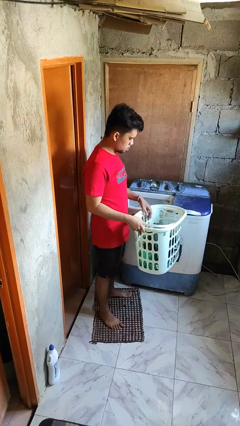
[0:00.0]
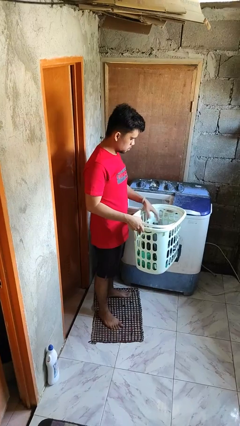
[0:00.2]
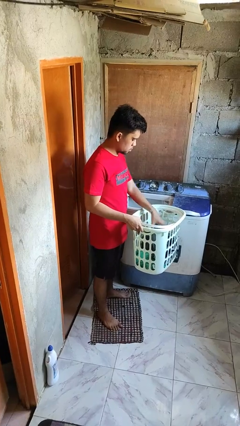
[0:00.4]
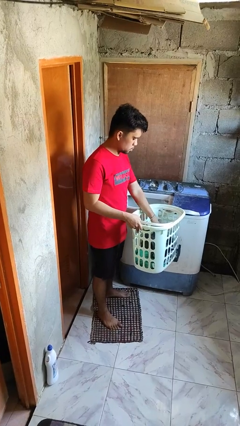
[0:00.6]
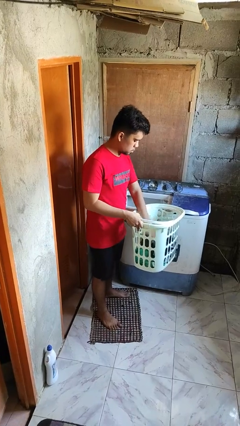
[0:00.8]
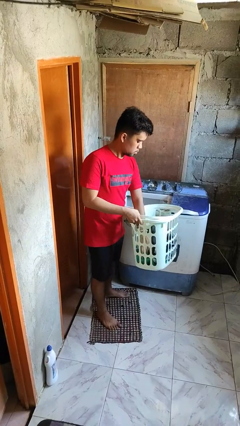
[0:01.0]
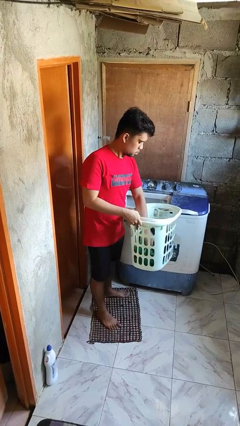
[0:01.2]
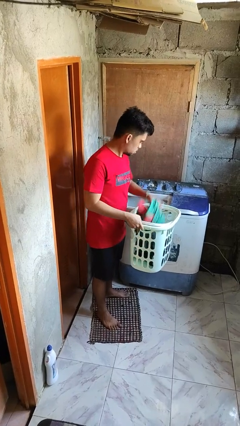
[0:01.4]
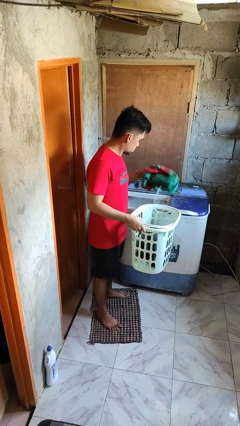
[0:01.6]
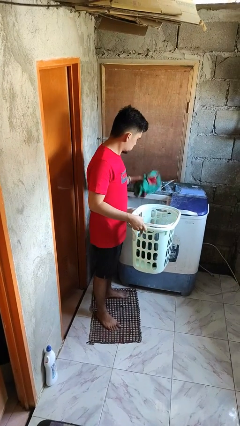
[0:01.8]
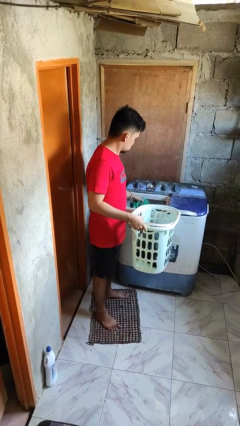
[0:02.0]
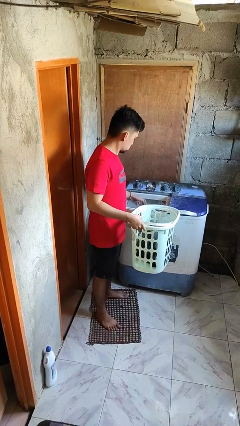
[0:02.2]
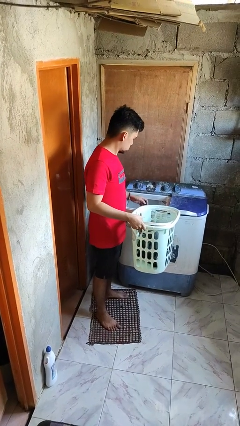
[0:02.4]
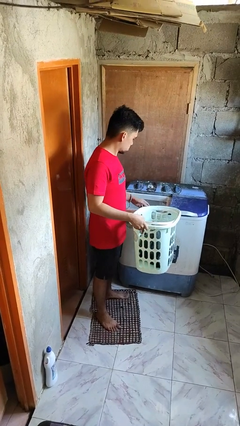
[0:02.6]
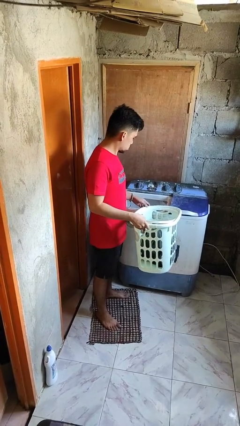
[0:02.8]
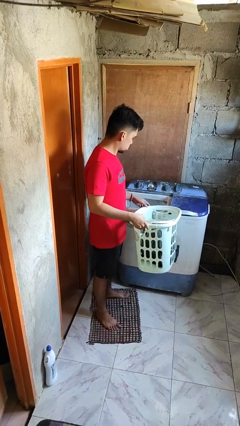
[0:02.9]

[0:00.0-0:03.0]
person loads clotheswasher

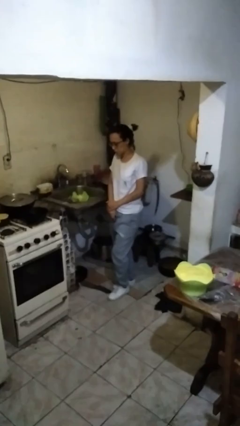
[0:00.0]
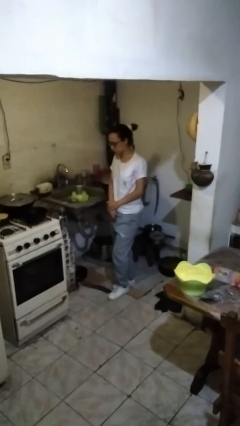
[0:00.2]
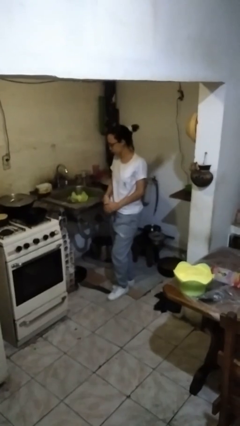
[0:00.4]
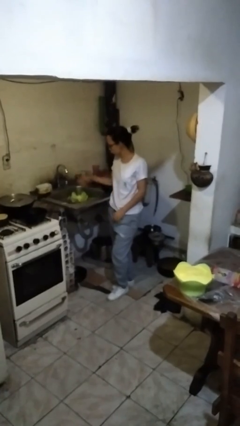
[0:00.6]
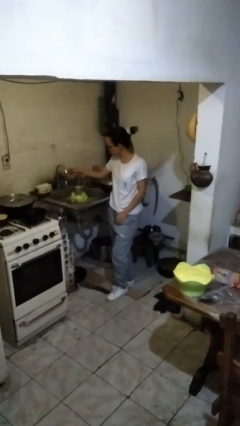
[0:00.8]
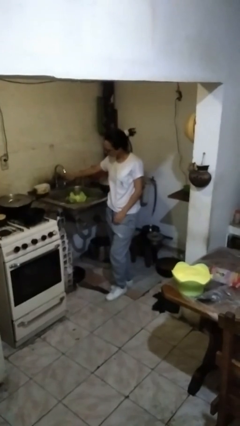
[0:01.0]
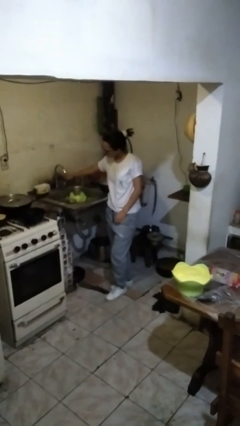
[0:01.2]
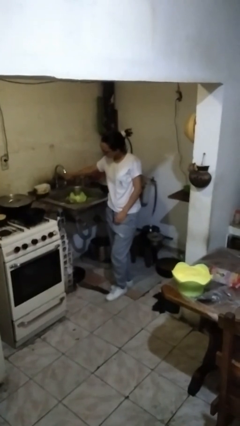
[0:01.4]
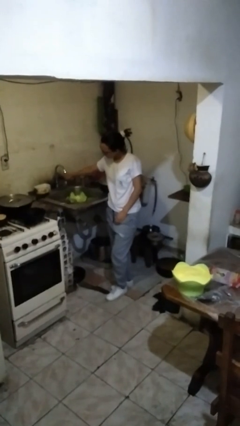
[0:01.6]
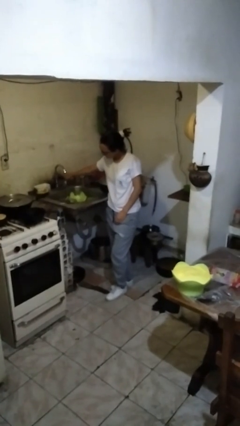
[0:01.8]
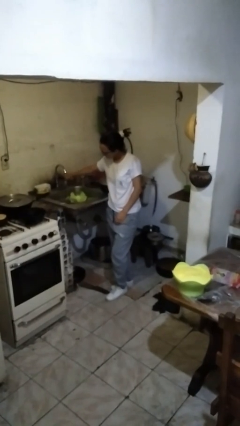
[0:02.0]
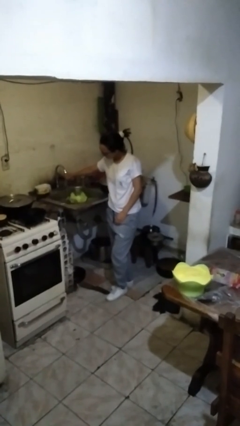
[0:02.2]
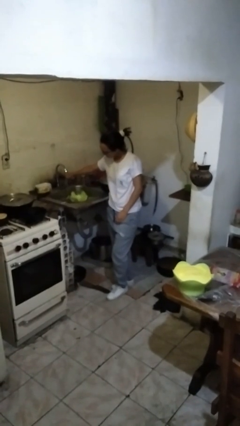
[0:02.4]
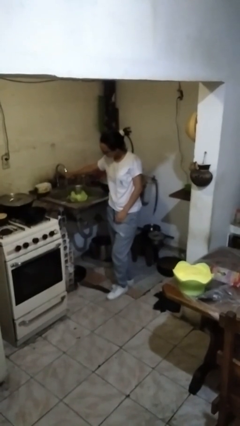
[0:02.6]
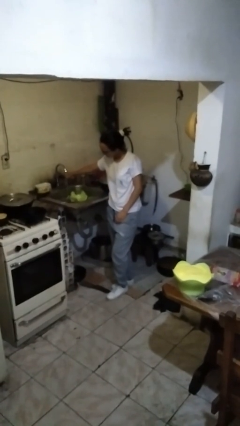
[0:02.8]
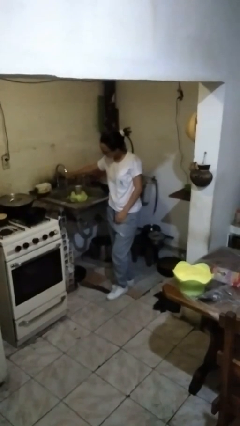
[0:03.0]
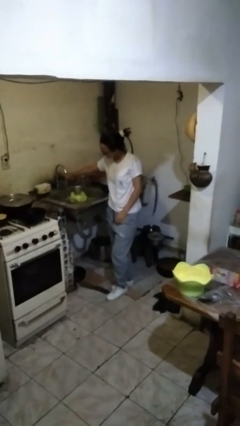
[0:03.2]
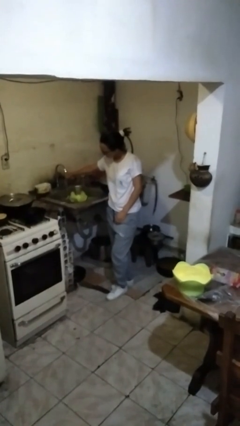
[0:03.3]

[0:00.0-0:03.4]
person turns on faucet

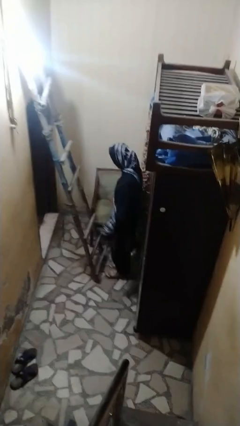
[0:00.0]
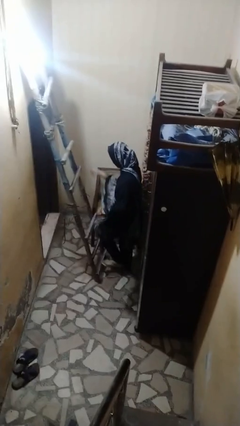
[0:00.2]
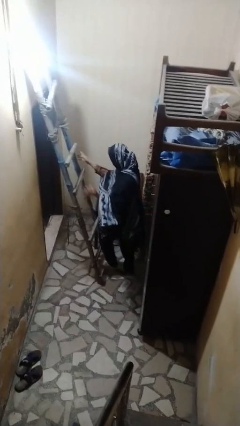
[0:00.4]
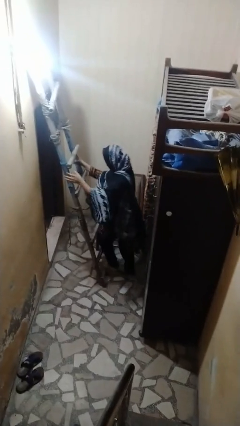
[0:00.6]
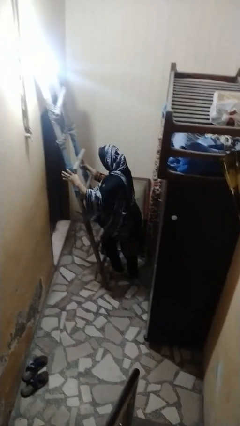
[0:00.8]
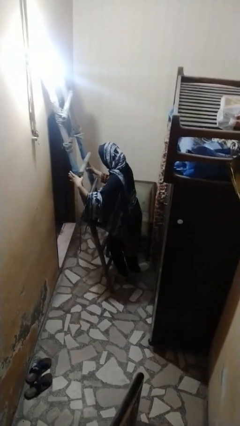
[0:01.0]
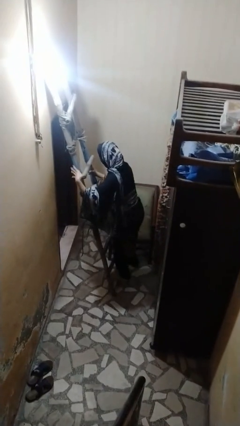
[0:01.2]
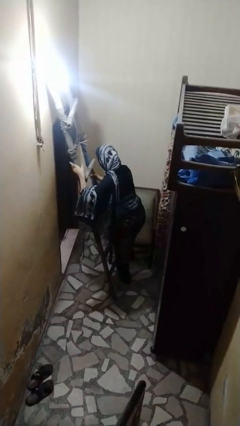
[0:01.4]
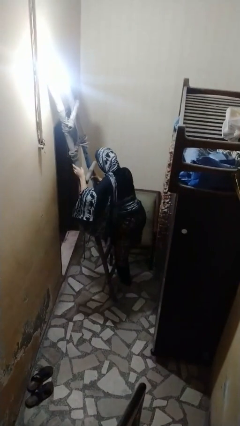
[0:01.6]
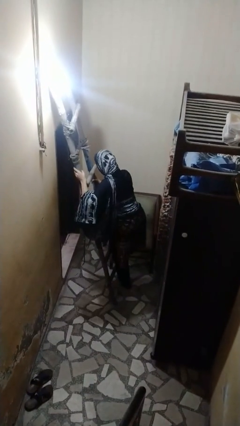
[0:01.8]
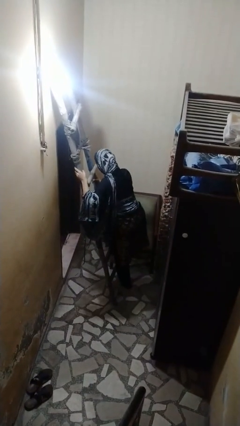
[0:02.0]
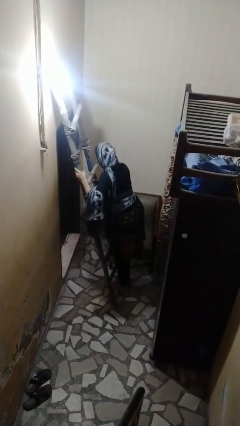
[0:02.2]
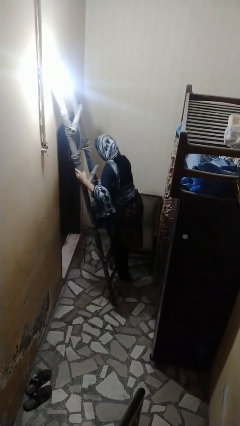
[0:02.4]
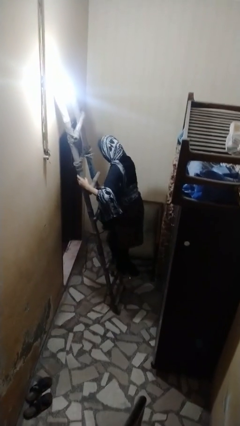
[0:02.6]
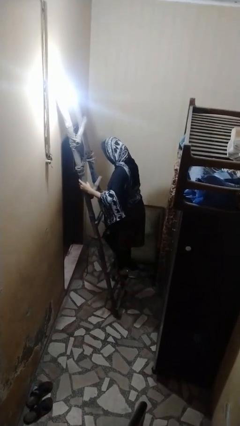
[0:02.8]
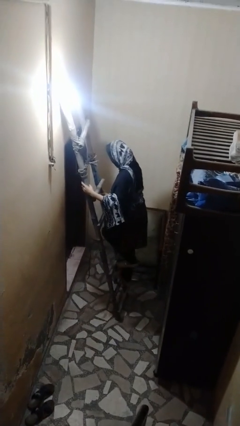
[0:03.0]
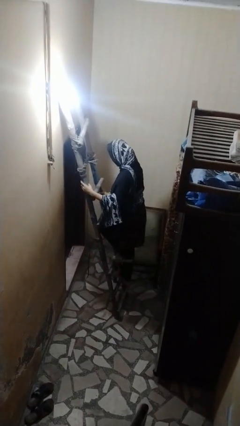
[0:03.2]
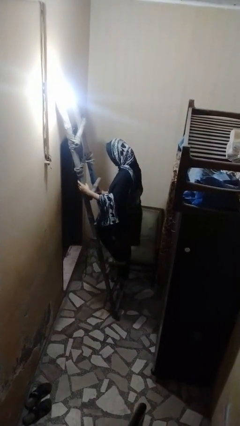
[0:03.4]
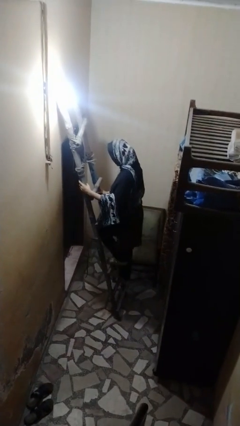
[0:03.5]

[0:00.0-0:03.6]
person climbs up ladder

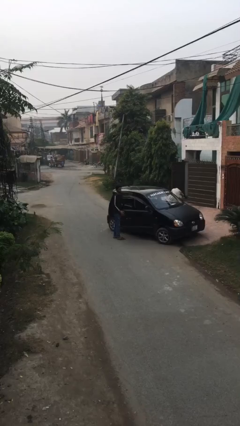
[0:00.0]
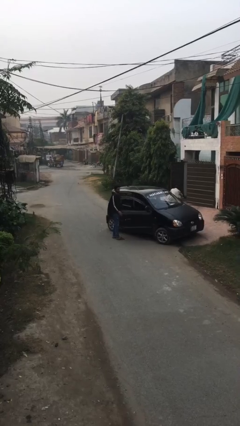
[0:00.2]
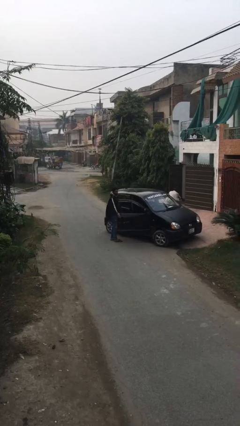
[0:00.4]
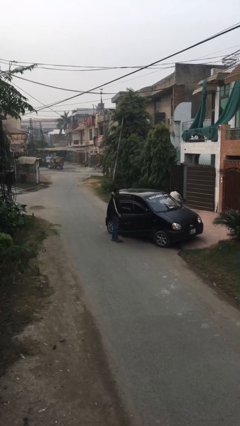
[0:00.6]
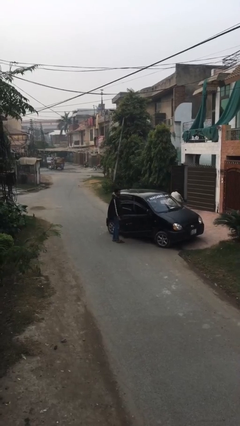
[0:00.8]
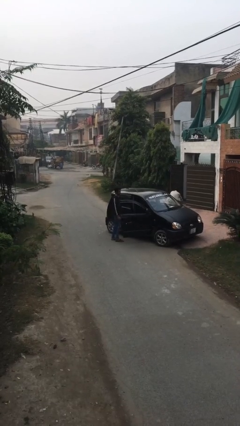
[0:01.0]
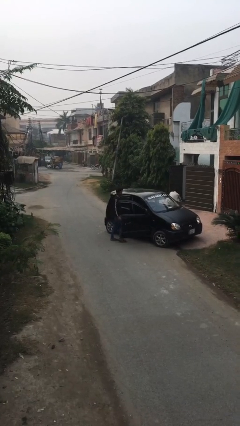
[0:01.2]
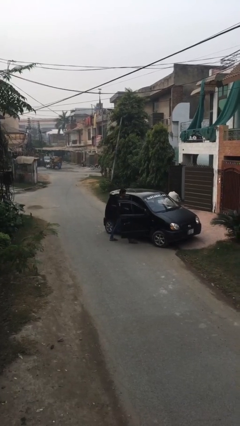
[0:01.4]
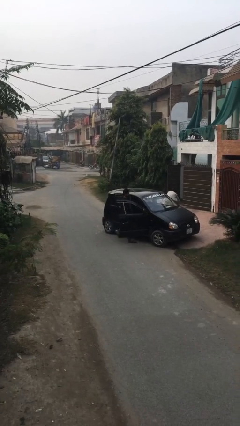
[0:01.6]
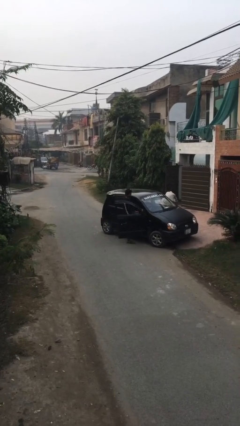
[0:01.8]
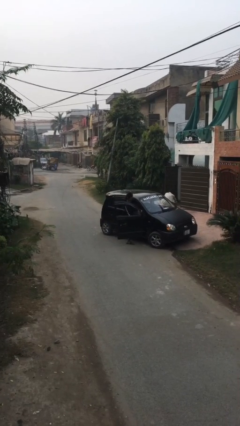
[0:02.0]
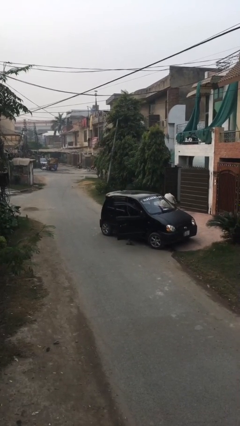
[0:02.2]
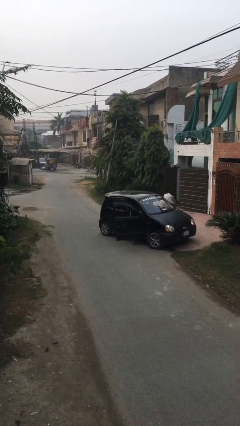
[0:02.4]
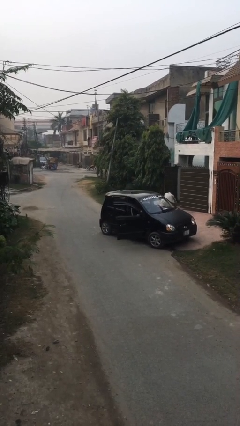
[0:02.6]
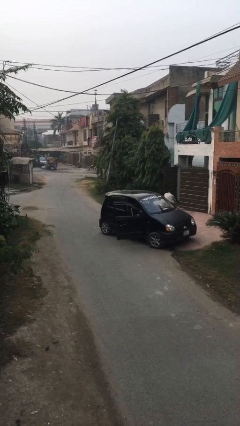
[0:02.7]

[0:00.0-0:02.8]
person enters car

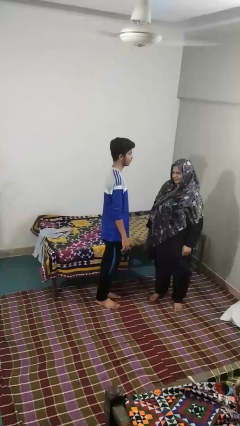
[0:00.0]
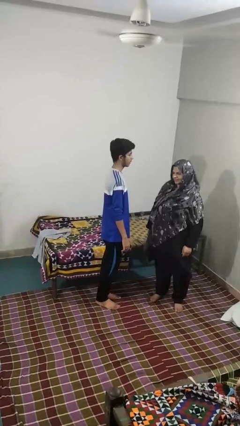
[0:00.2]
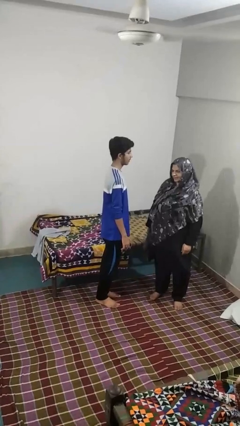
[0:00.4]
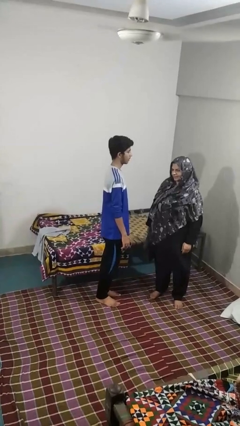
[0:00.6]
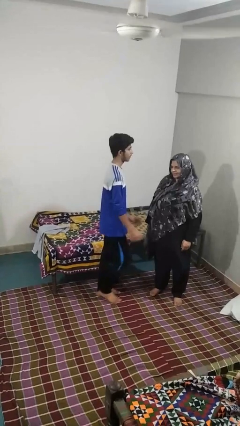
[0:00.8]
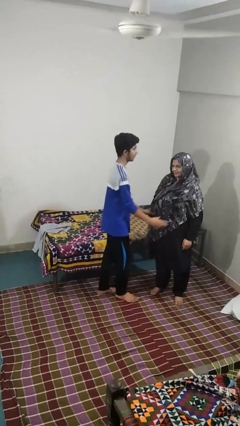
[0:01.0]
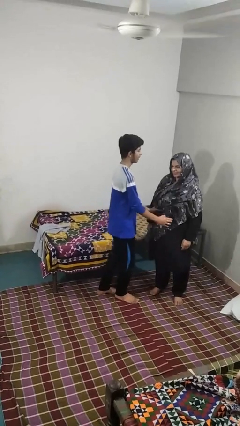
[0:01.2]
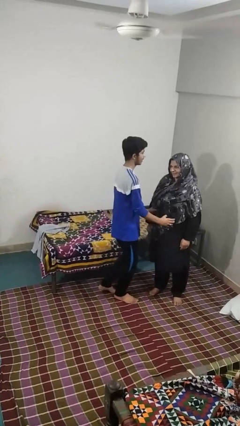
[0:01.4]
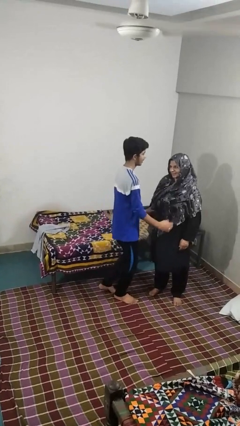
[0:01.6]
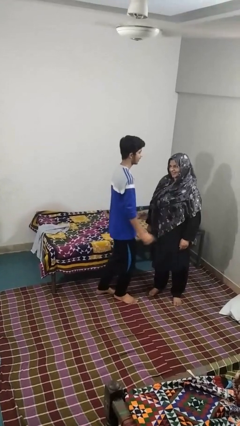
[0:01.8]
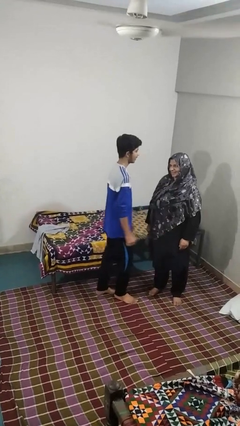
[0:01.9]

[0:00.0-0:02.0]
person tickles person

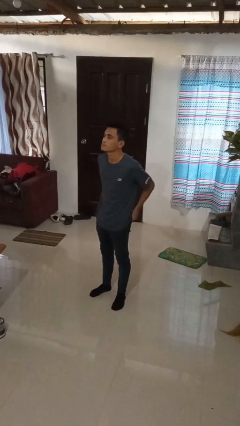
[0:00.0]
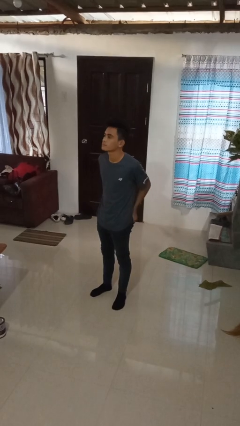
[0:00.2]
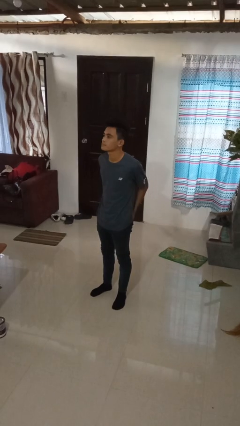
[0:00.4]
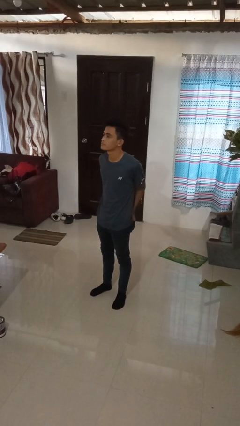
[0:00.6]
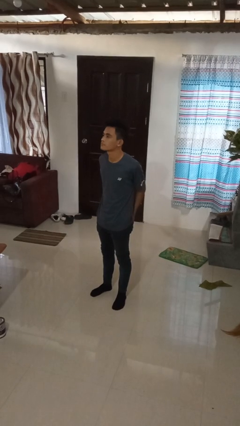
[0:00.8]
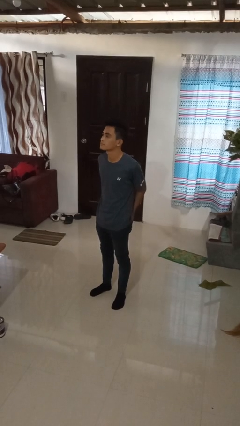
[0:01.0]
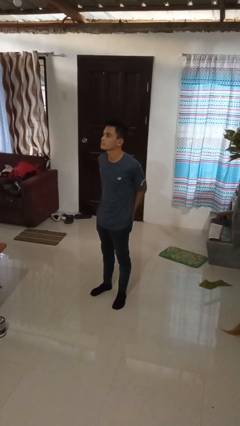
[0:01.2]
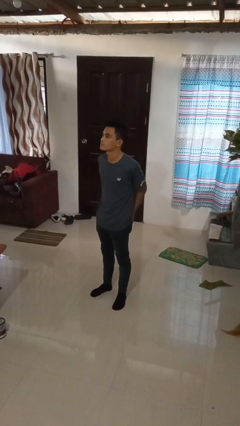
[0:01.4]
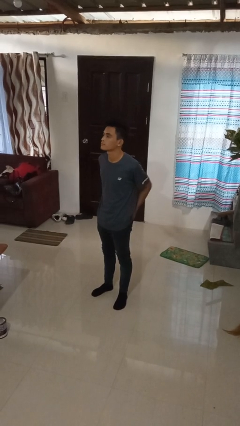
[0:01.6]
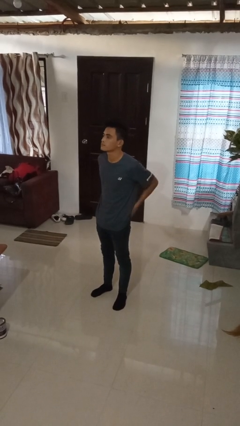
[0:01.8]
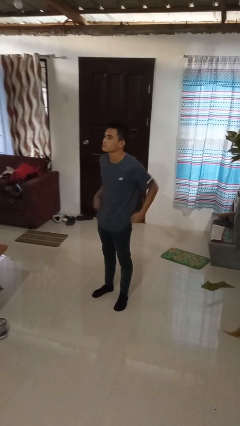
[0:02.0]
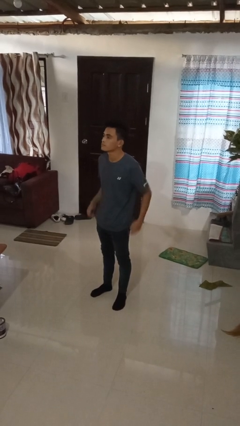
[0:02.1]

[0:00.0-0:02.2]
person puts hands in back pockets

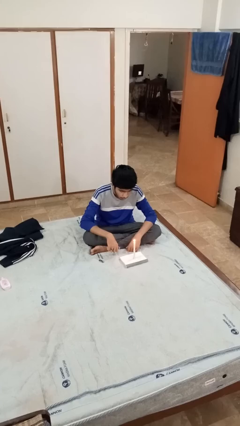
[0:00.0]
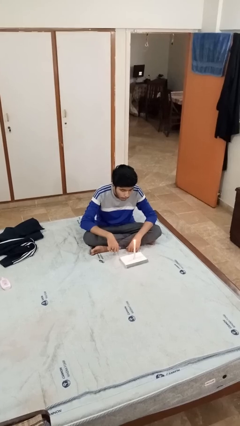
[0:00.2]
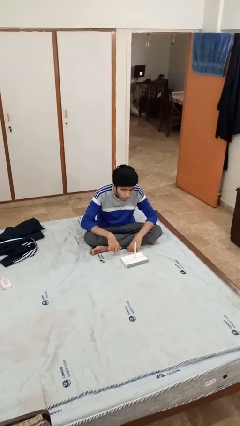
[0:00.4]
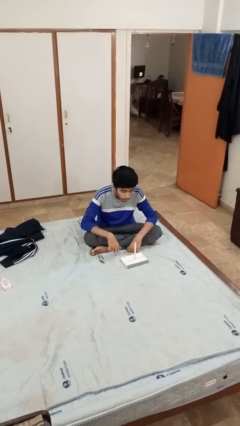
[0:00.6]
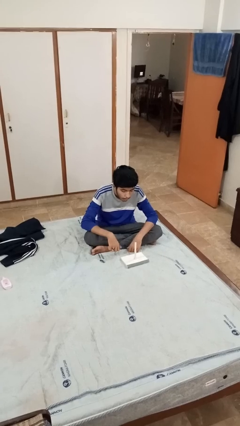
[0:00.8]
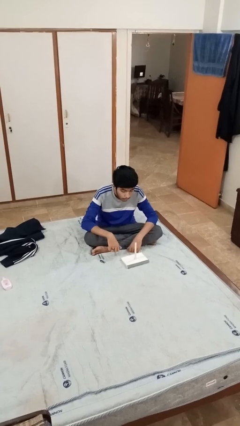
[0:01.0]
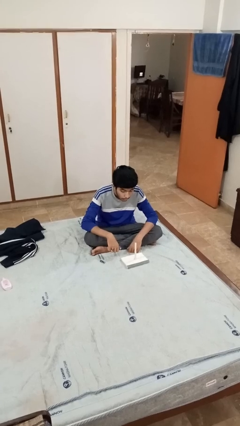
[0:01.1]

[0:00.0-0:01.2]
person extinguishes candle
